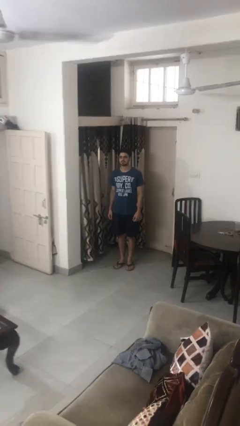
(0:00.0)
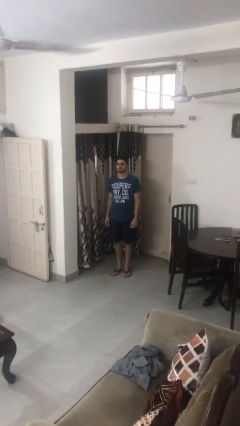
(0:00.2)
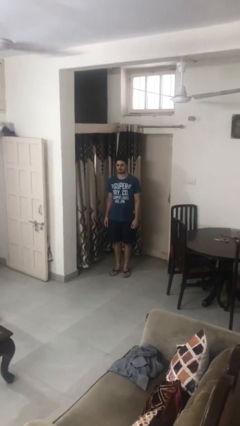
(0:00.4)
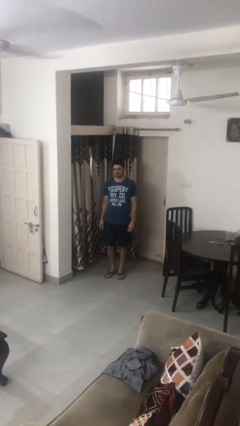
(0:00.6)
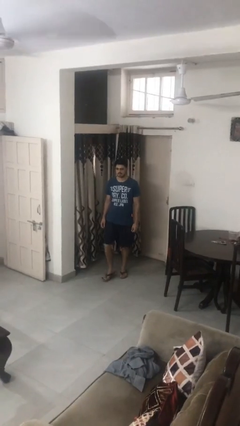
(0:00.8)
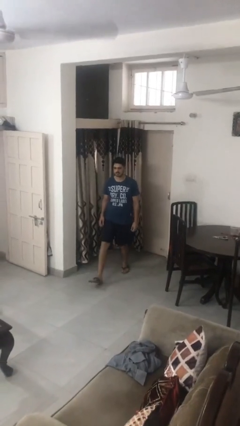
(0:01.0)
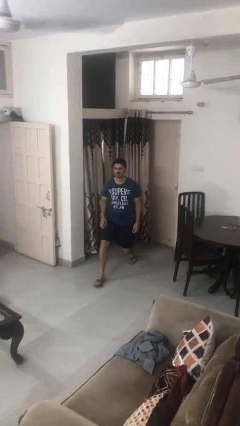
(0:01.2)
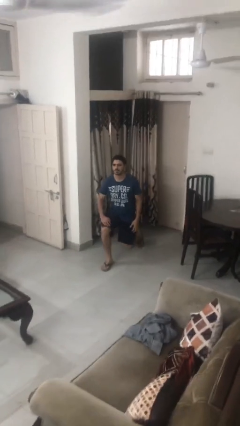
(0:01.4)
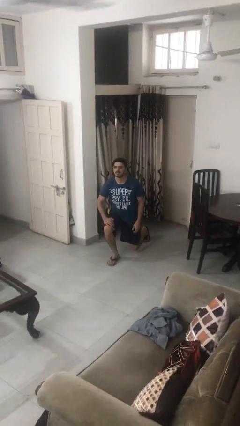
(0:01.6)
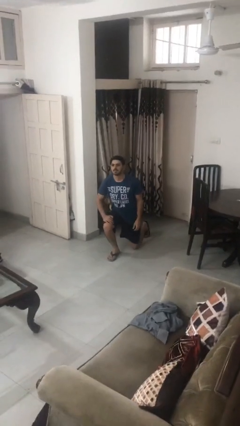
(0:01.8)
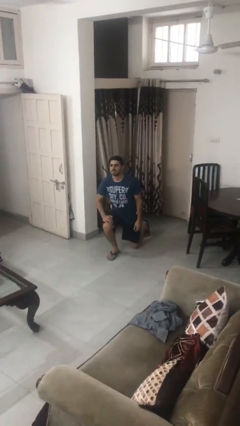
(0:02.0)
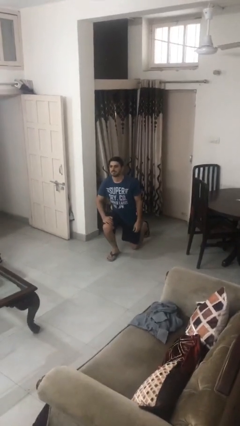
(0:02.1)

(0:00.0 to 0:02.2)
person kneels

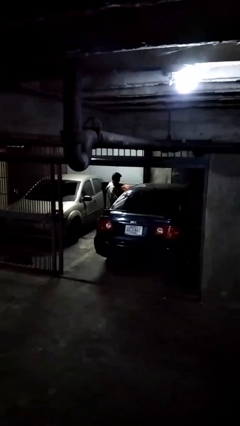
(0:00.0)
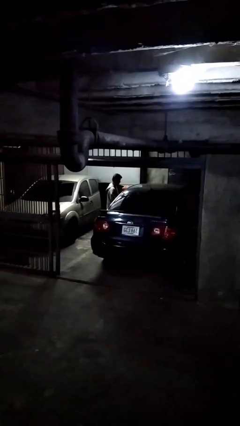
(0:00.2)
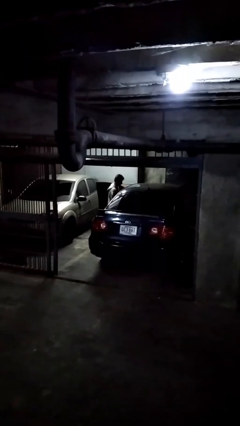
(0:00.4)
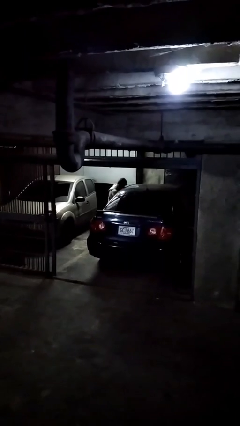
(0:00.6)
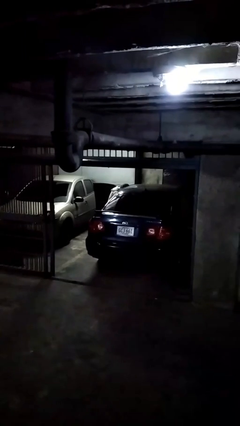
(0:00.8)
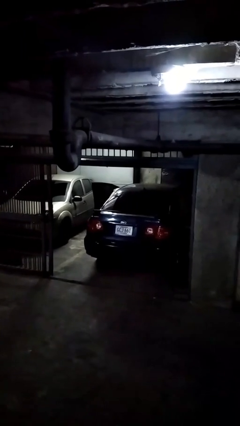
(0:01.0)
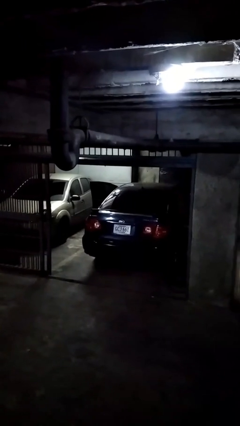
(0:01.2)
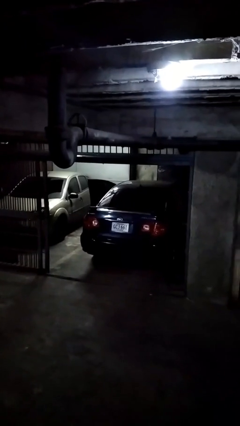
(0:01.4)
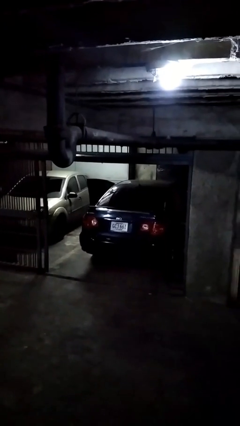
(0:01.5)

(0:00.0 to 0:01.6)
person loads car

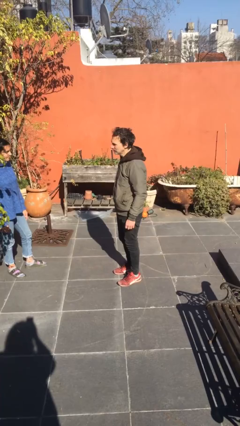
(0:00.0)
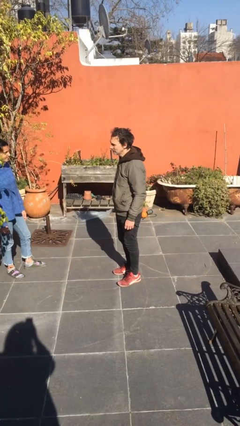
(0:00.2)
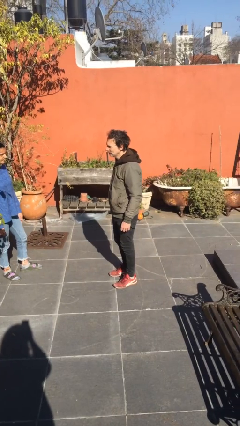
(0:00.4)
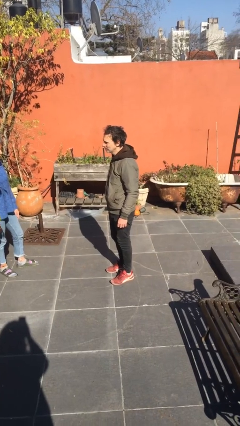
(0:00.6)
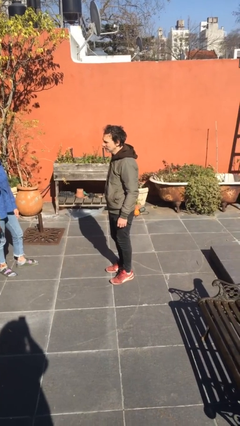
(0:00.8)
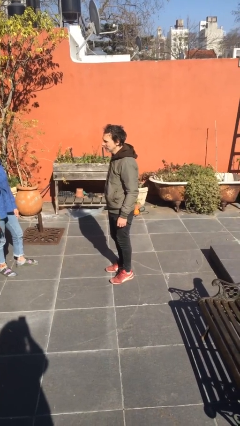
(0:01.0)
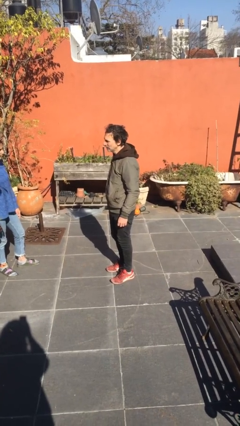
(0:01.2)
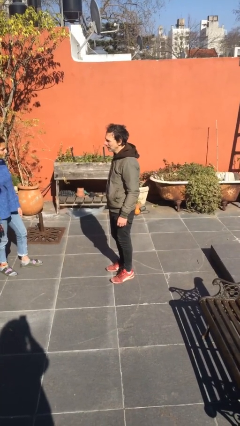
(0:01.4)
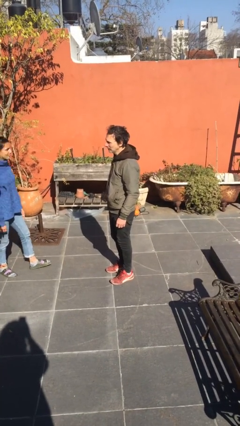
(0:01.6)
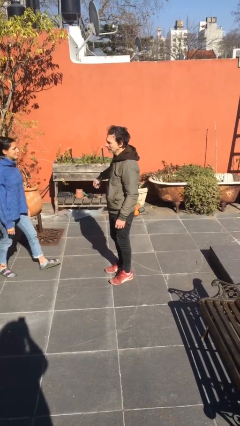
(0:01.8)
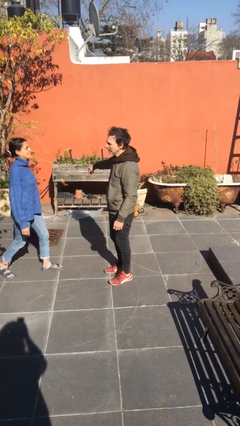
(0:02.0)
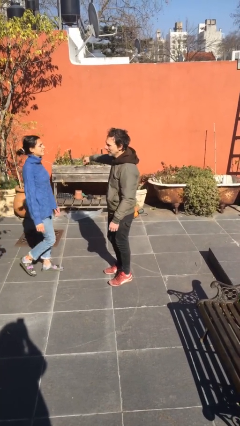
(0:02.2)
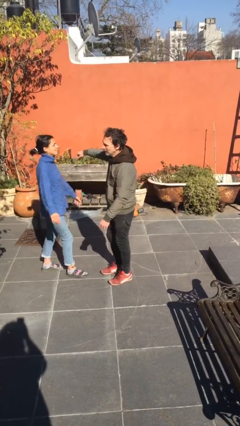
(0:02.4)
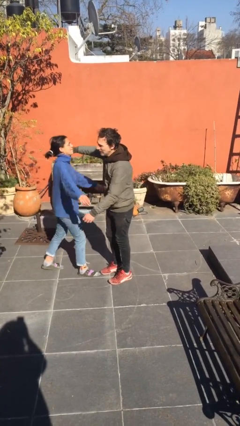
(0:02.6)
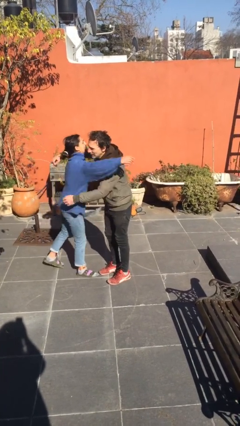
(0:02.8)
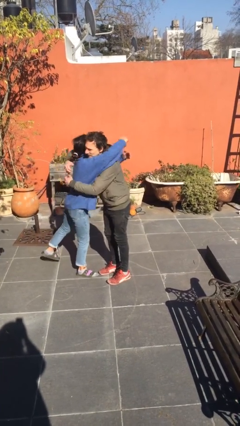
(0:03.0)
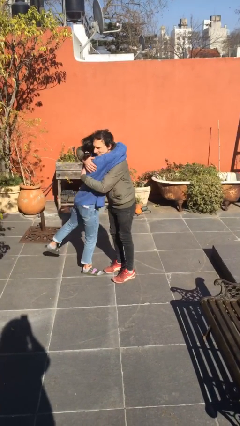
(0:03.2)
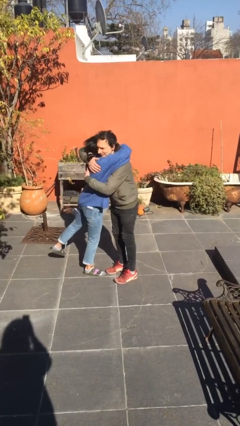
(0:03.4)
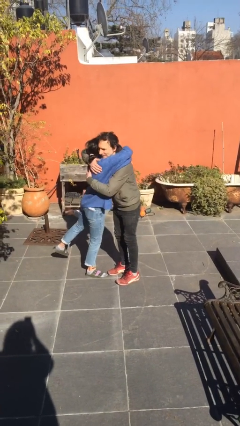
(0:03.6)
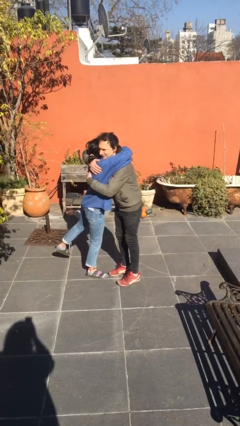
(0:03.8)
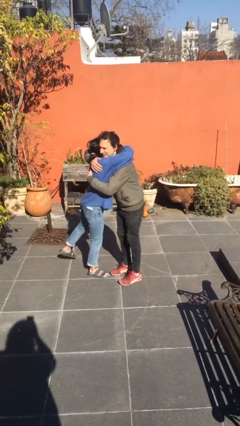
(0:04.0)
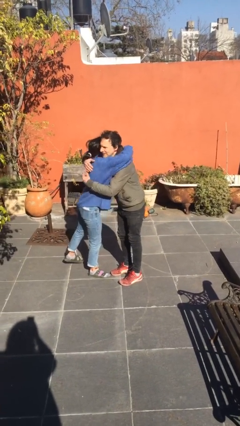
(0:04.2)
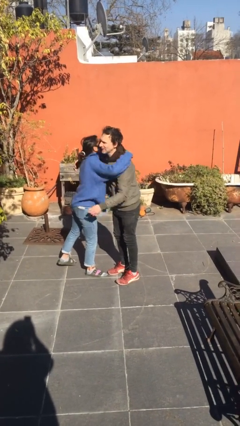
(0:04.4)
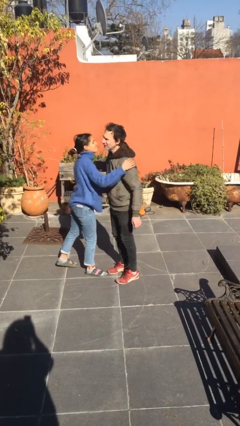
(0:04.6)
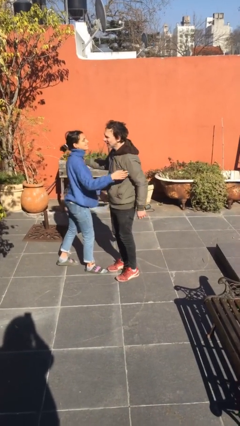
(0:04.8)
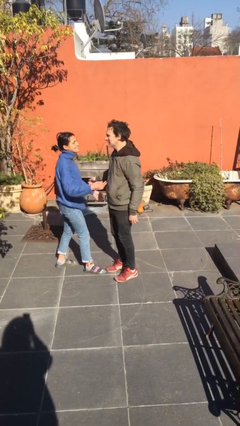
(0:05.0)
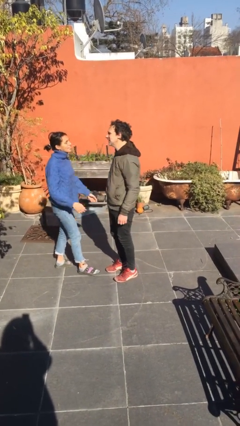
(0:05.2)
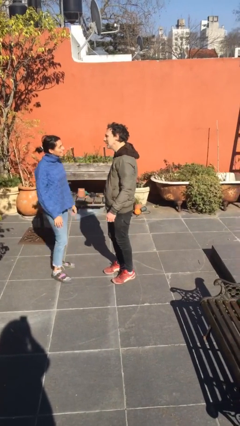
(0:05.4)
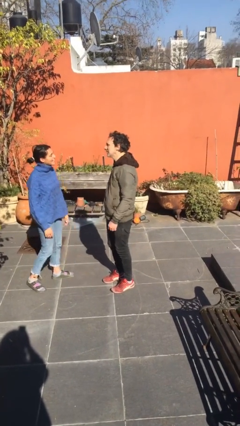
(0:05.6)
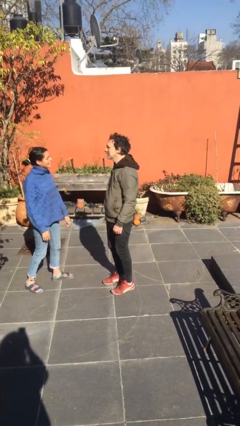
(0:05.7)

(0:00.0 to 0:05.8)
person embraces person

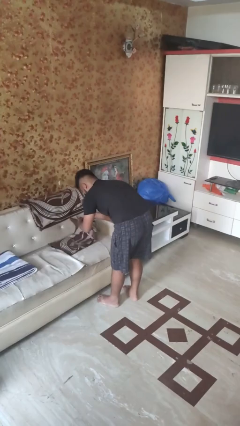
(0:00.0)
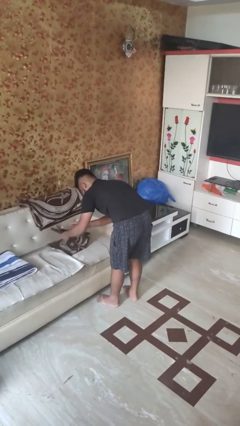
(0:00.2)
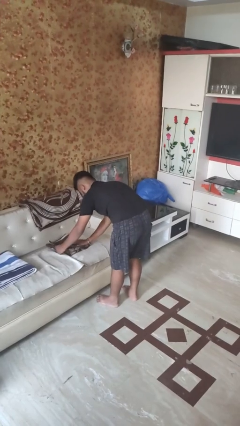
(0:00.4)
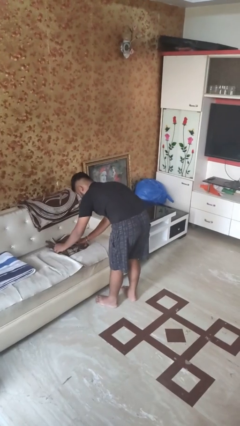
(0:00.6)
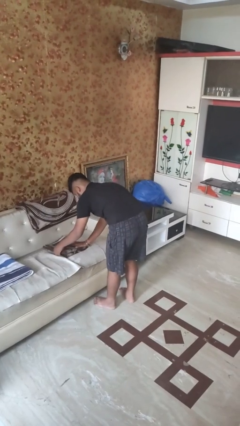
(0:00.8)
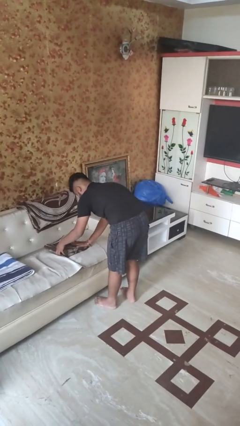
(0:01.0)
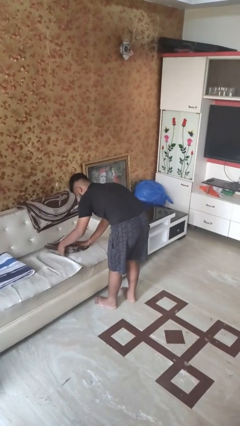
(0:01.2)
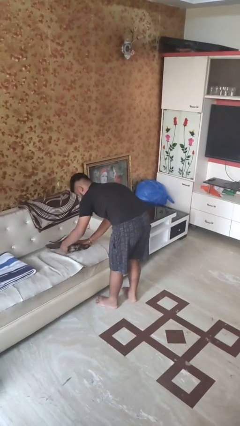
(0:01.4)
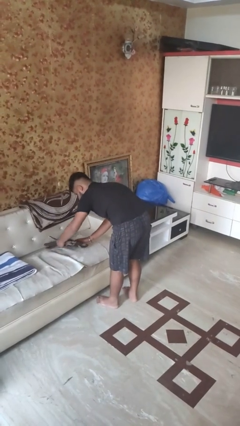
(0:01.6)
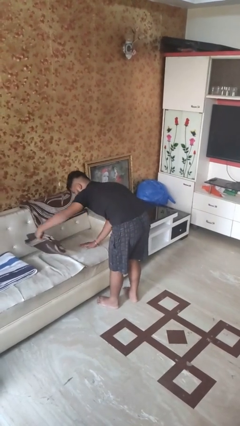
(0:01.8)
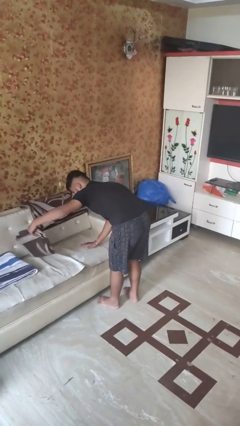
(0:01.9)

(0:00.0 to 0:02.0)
person folds towel

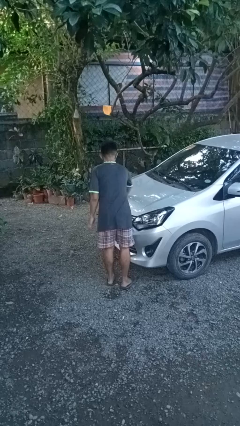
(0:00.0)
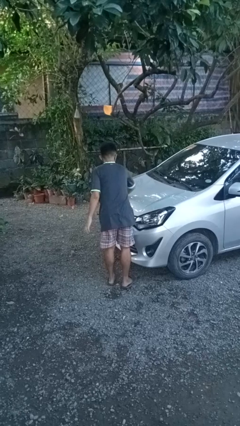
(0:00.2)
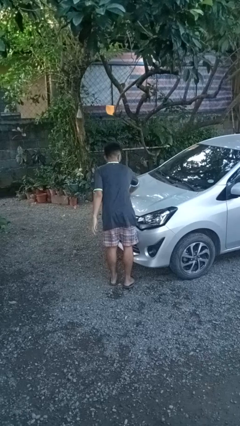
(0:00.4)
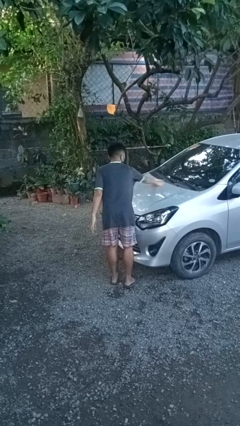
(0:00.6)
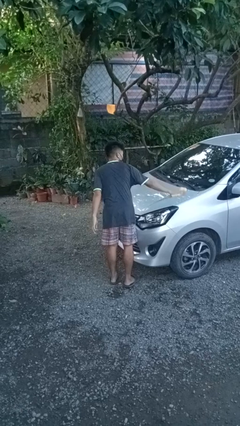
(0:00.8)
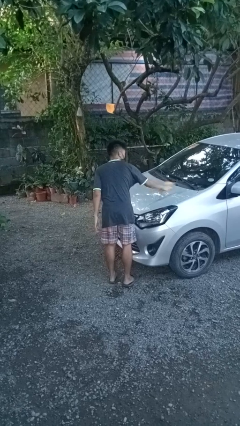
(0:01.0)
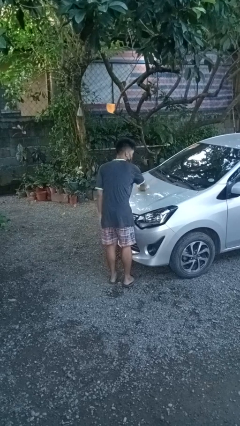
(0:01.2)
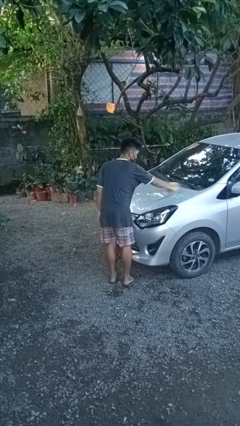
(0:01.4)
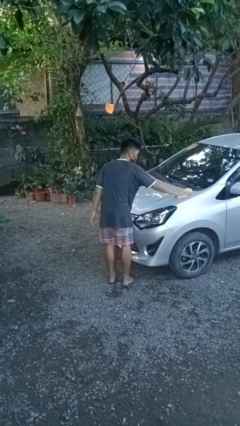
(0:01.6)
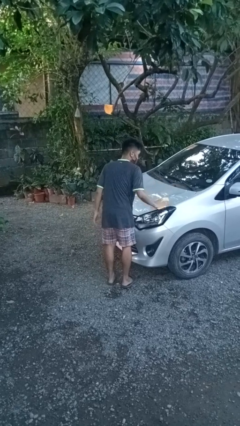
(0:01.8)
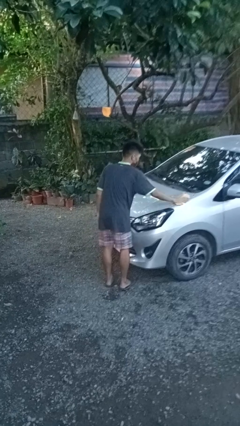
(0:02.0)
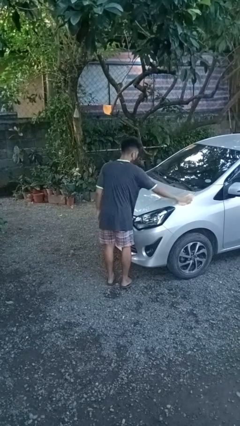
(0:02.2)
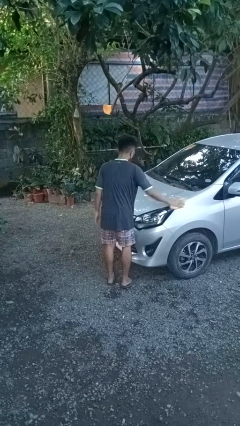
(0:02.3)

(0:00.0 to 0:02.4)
person polishes car with rag

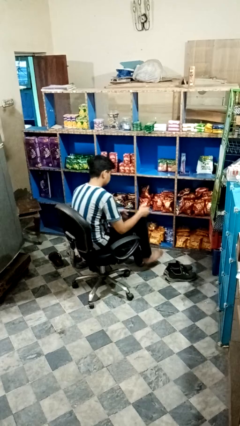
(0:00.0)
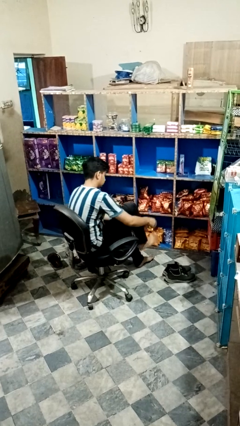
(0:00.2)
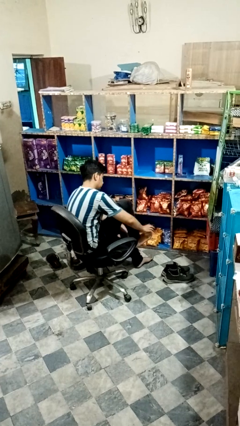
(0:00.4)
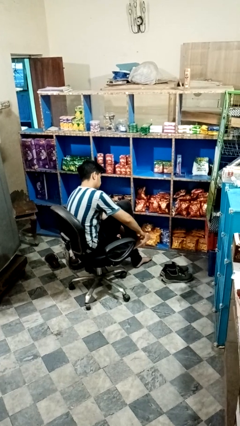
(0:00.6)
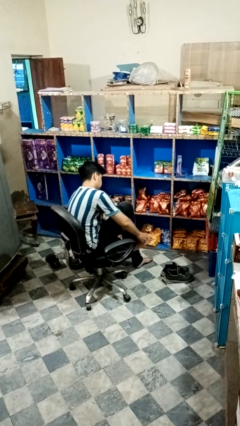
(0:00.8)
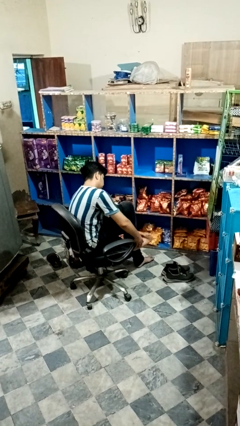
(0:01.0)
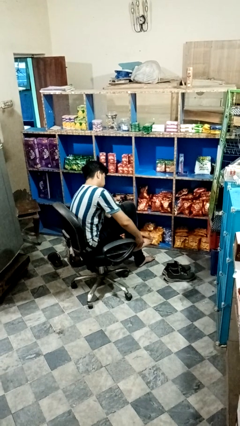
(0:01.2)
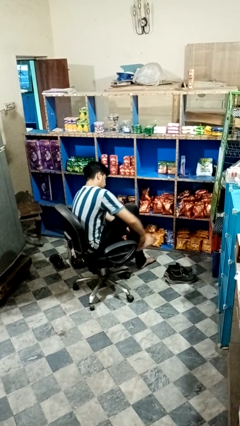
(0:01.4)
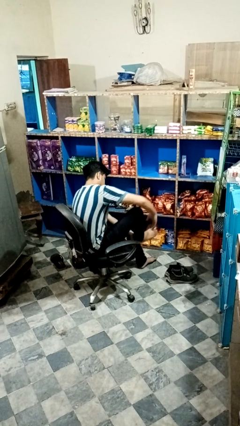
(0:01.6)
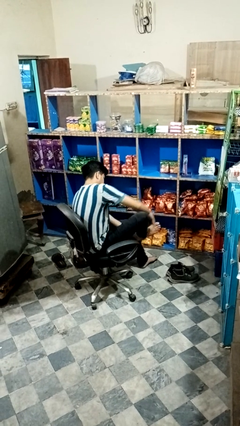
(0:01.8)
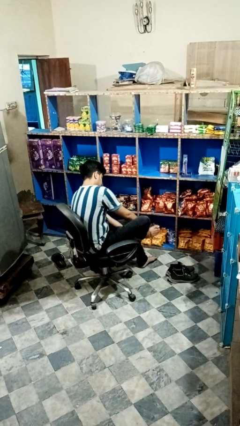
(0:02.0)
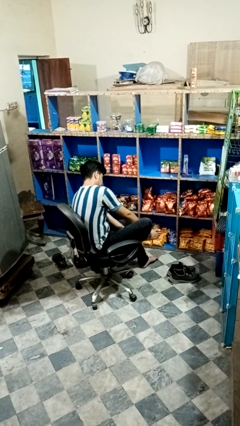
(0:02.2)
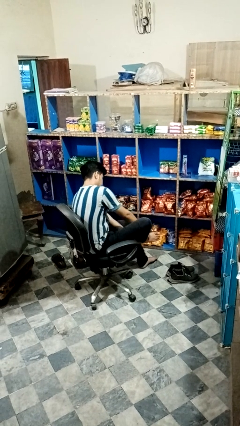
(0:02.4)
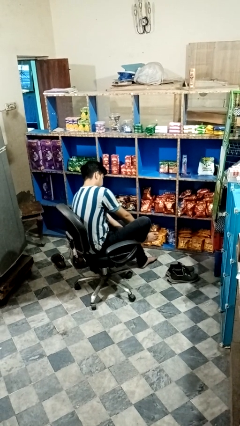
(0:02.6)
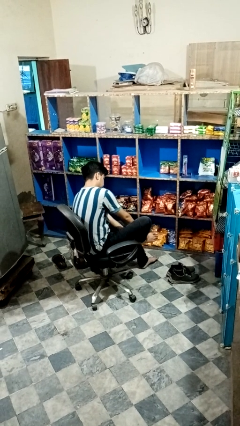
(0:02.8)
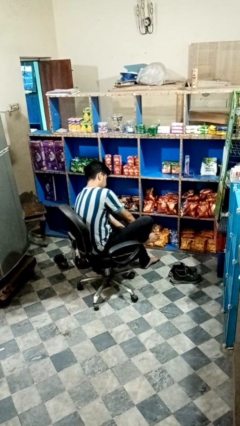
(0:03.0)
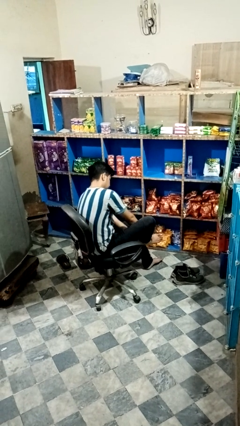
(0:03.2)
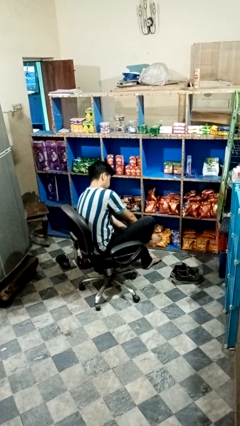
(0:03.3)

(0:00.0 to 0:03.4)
person rubs foot
